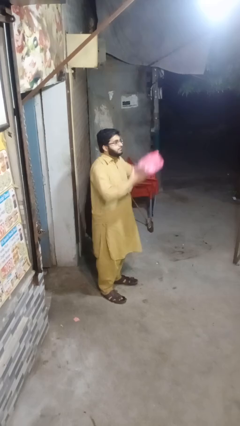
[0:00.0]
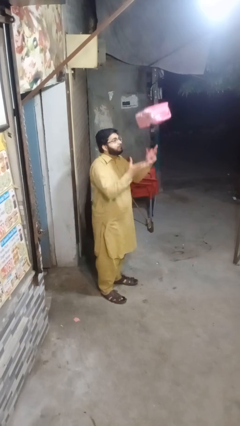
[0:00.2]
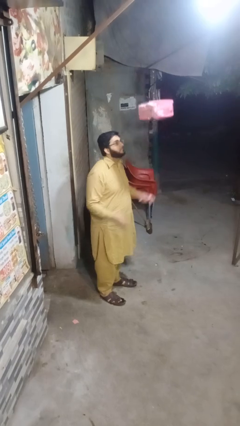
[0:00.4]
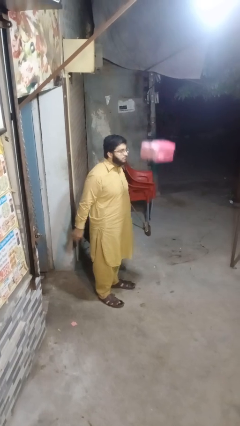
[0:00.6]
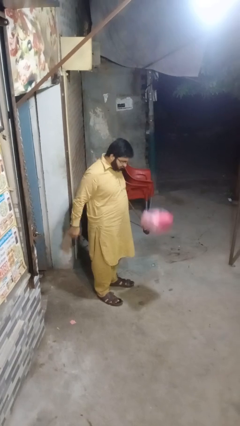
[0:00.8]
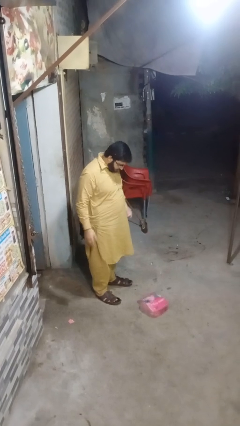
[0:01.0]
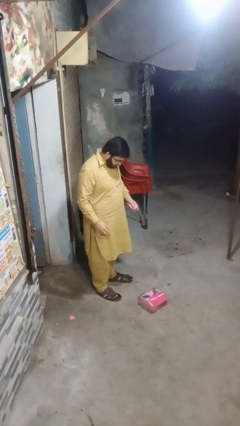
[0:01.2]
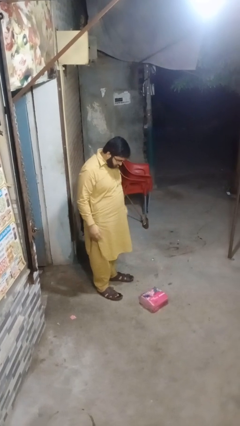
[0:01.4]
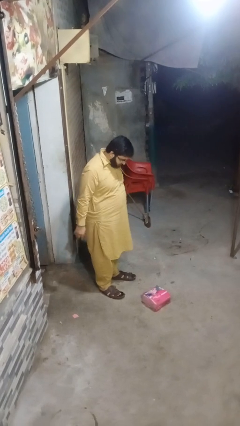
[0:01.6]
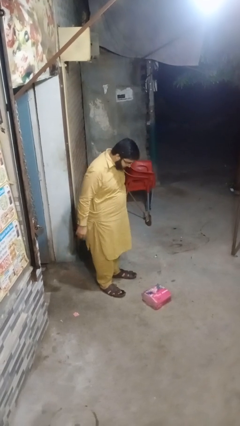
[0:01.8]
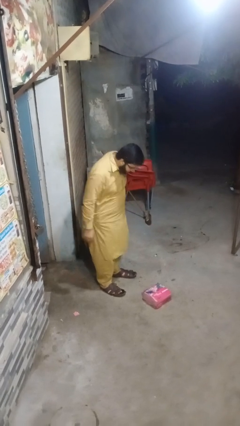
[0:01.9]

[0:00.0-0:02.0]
person throws object into air

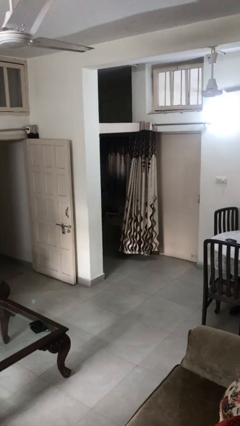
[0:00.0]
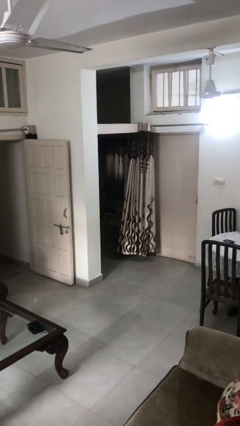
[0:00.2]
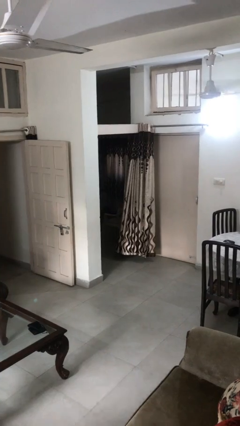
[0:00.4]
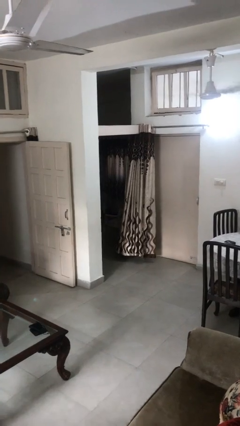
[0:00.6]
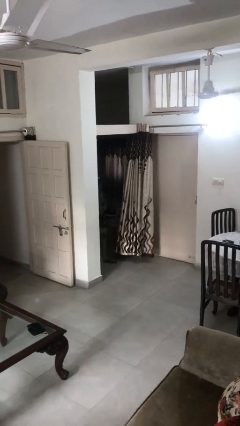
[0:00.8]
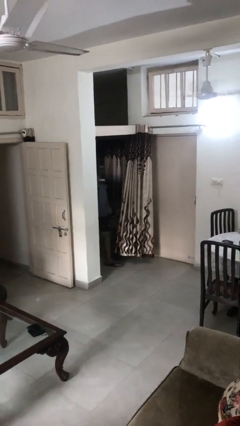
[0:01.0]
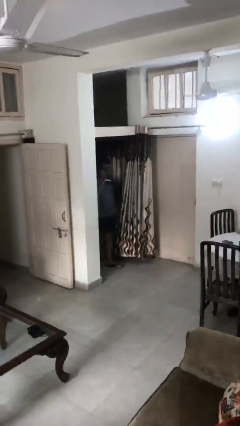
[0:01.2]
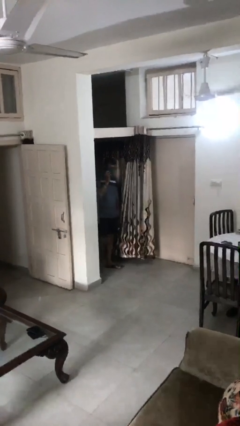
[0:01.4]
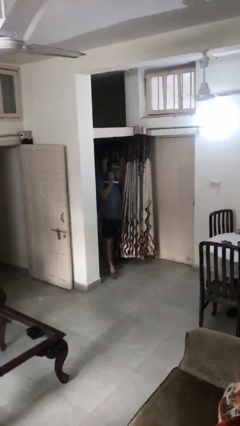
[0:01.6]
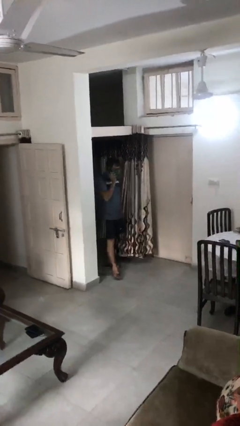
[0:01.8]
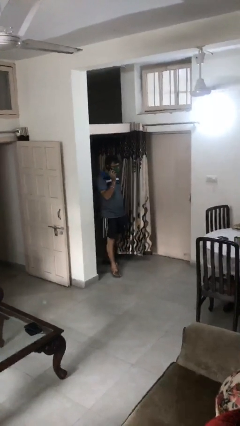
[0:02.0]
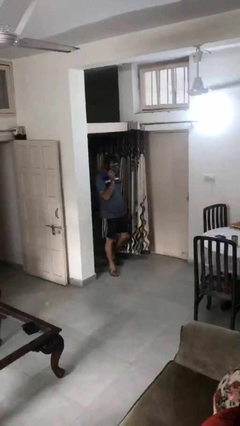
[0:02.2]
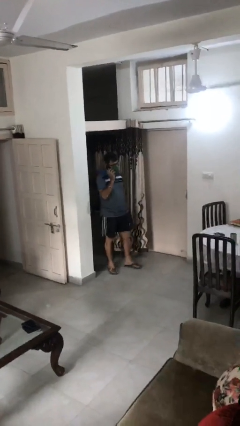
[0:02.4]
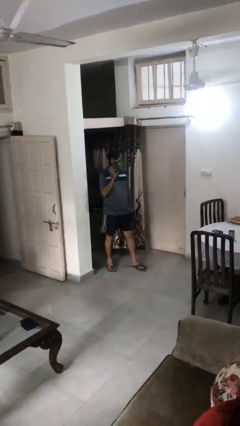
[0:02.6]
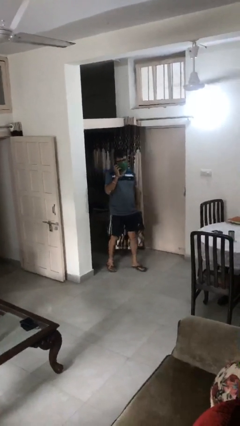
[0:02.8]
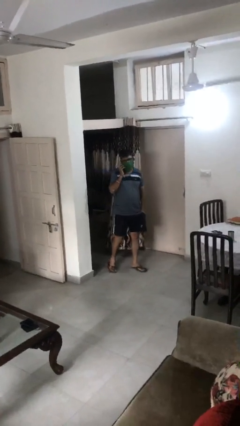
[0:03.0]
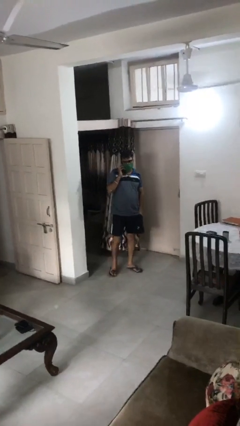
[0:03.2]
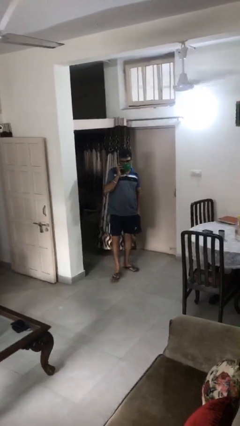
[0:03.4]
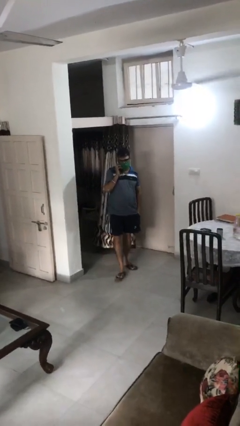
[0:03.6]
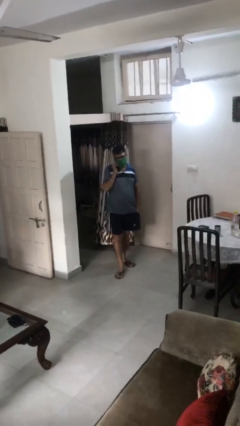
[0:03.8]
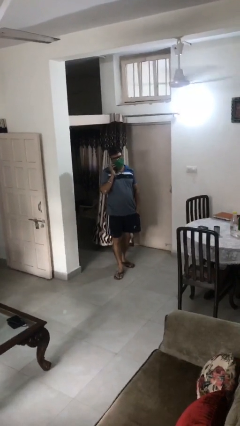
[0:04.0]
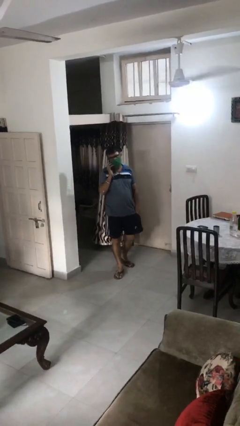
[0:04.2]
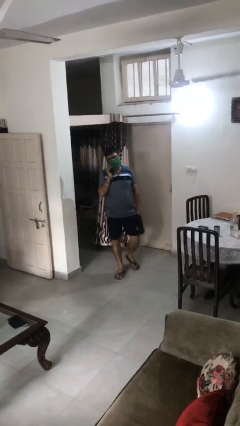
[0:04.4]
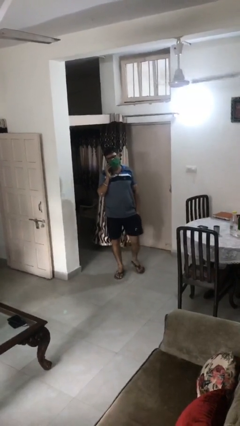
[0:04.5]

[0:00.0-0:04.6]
person enters scene through structure

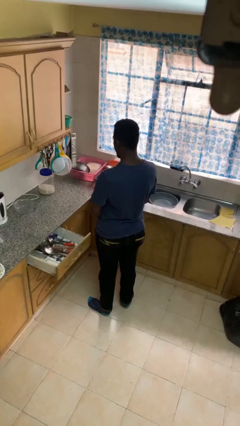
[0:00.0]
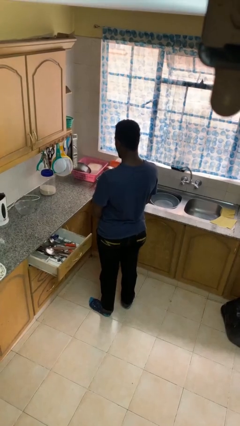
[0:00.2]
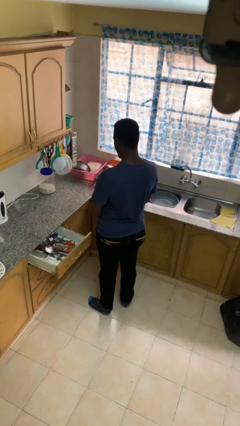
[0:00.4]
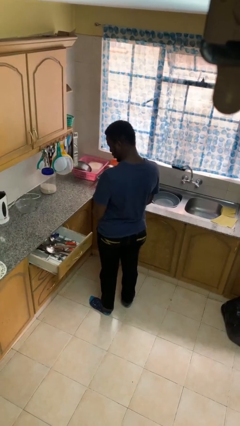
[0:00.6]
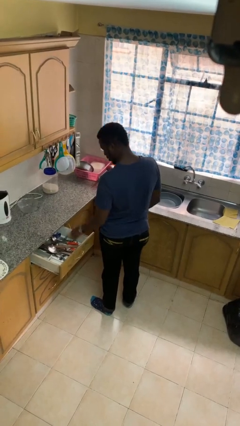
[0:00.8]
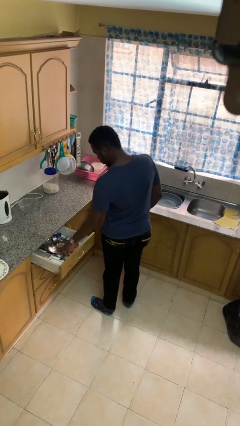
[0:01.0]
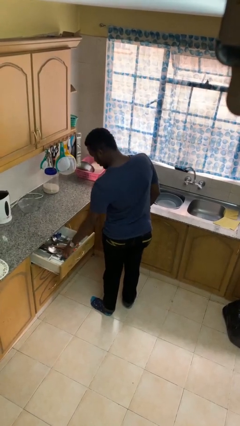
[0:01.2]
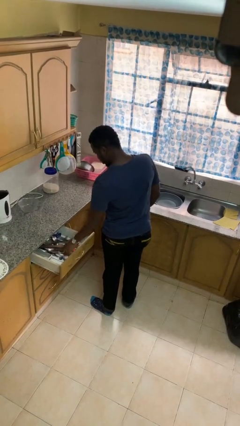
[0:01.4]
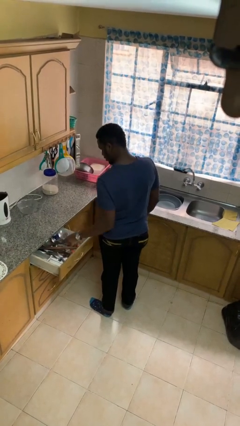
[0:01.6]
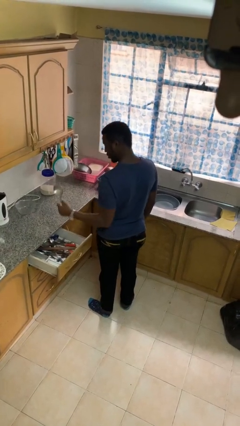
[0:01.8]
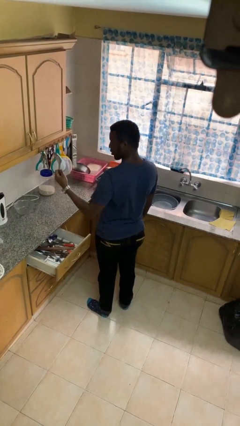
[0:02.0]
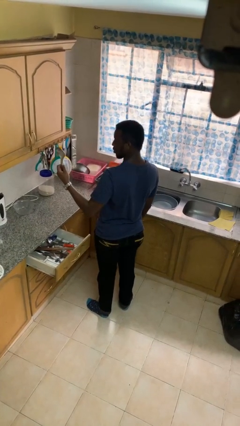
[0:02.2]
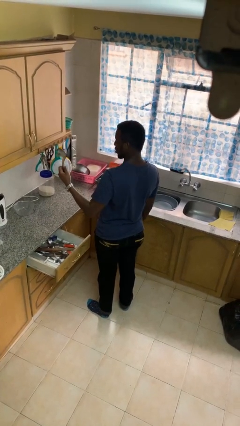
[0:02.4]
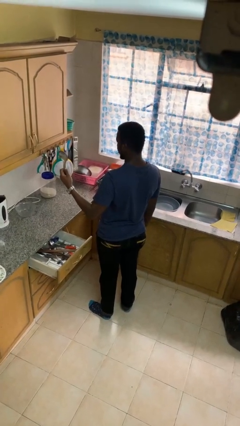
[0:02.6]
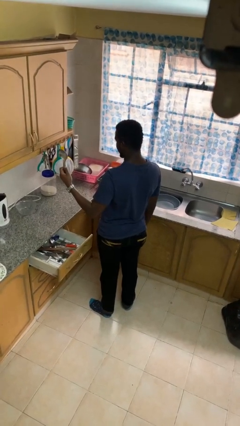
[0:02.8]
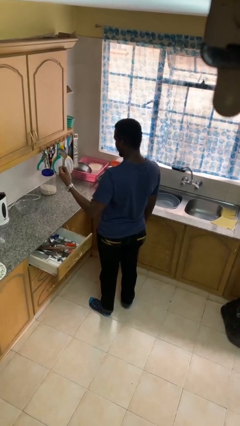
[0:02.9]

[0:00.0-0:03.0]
person takes object from kitchen drawer

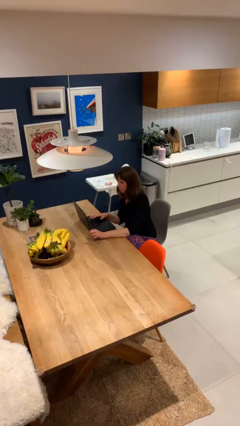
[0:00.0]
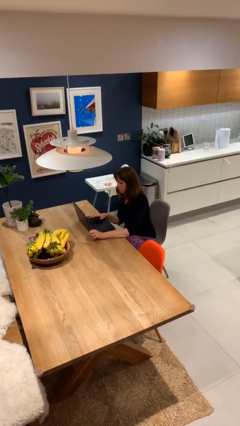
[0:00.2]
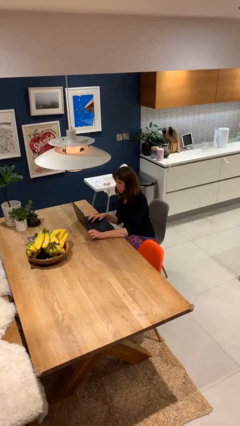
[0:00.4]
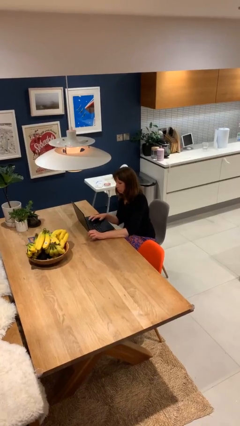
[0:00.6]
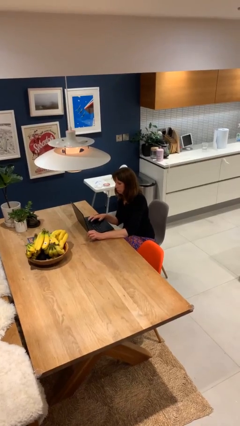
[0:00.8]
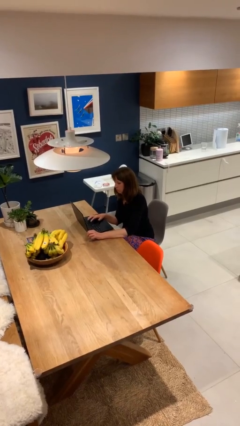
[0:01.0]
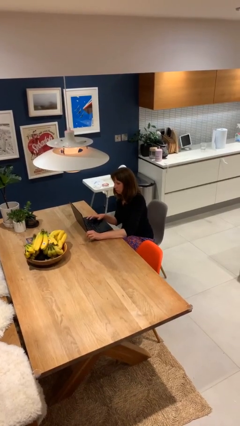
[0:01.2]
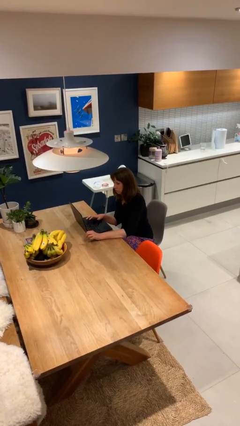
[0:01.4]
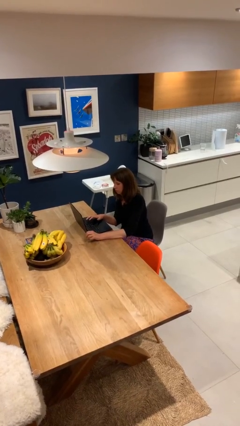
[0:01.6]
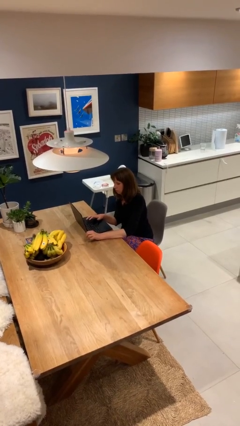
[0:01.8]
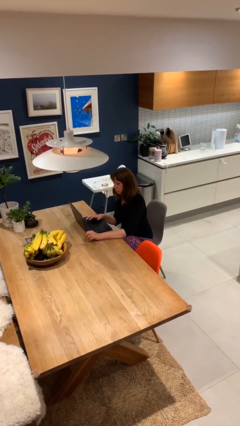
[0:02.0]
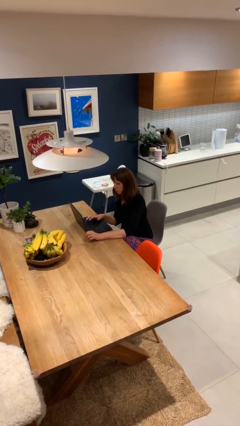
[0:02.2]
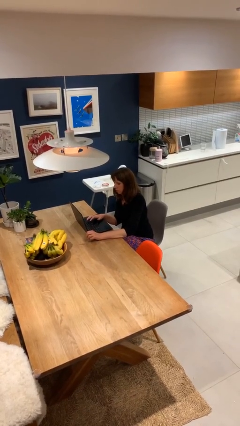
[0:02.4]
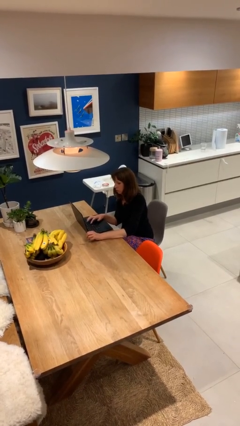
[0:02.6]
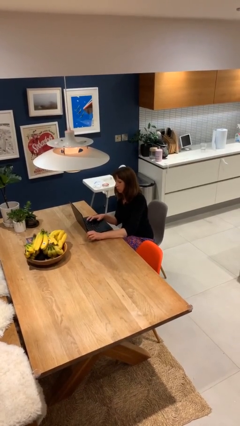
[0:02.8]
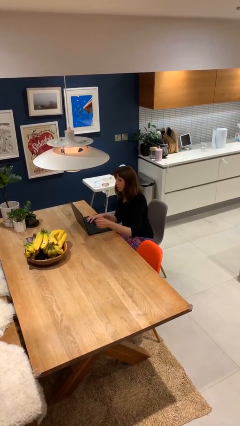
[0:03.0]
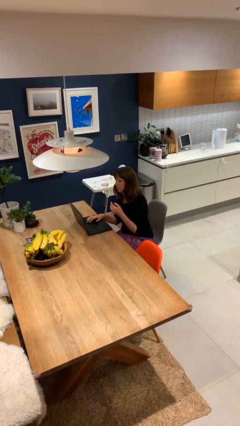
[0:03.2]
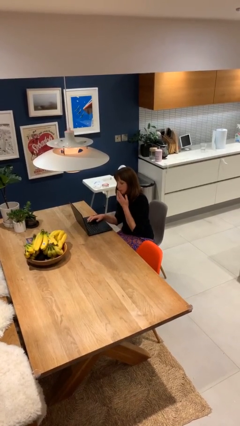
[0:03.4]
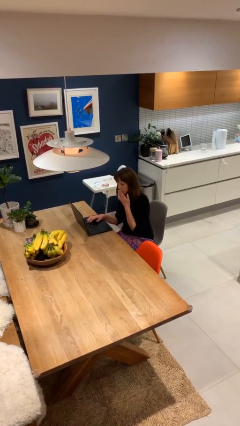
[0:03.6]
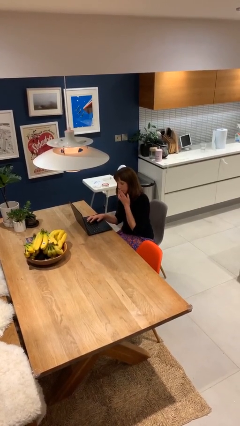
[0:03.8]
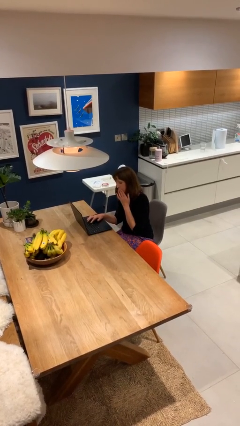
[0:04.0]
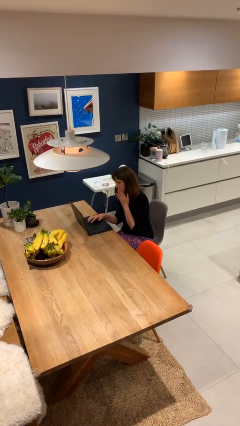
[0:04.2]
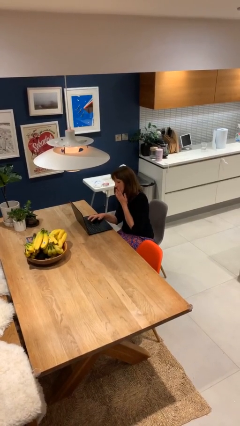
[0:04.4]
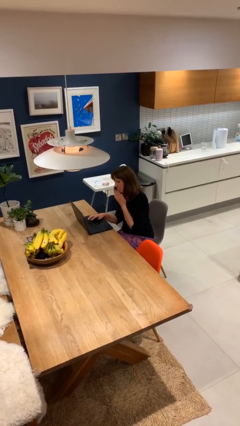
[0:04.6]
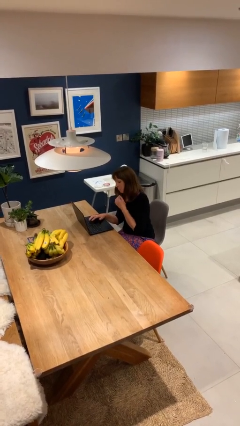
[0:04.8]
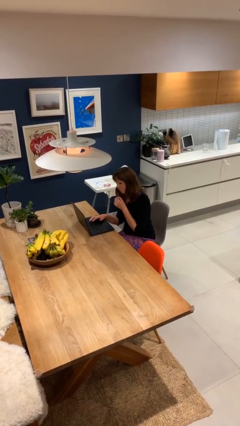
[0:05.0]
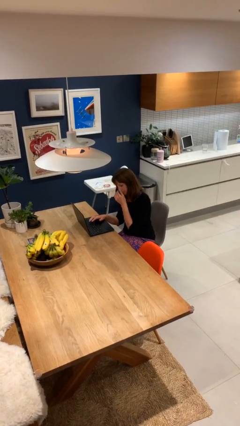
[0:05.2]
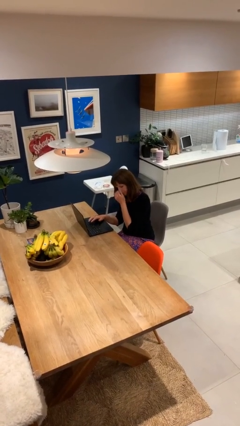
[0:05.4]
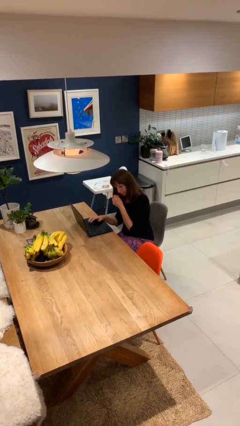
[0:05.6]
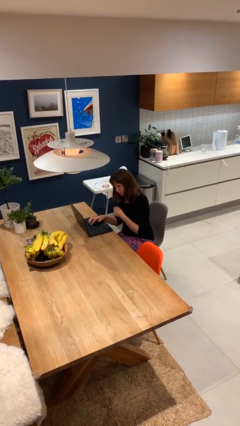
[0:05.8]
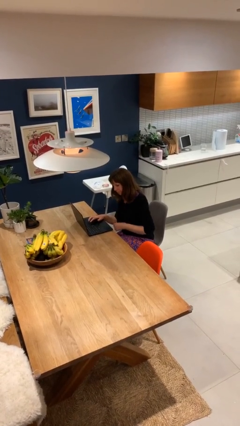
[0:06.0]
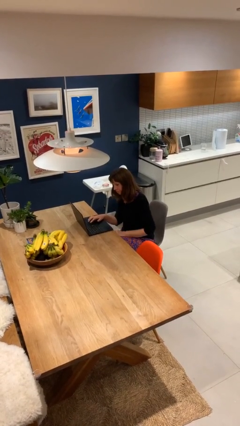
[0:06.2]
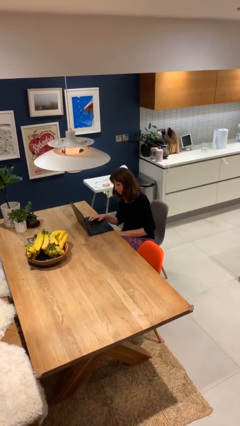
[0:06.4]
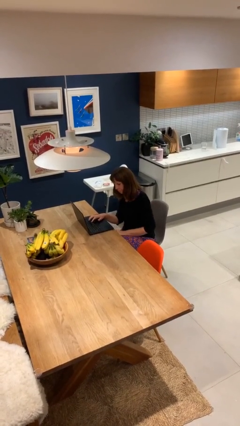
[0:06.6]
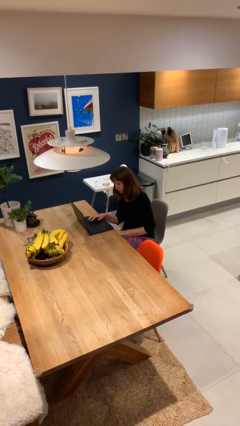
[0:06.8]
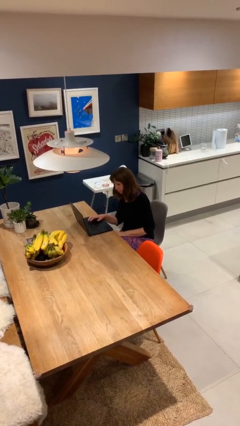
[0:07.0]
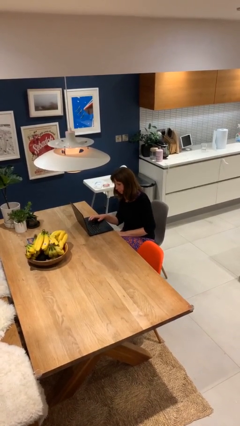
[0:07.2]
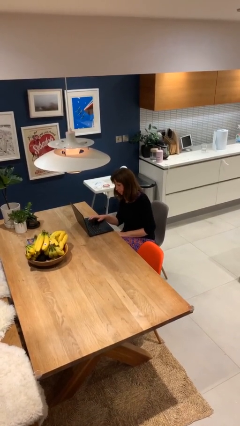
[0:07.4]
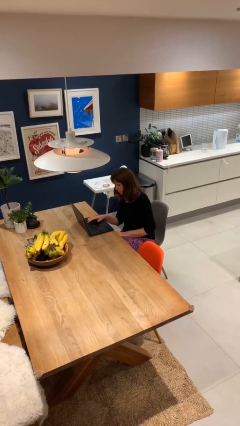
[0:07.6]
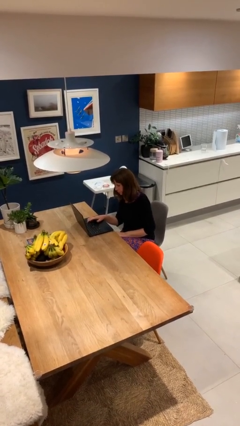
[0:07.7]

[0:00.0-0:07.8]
person interacts with laptop

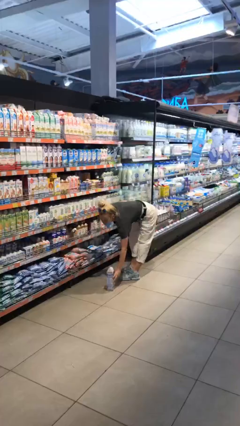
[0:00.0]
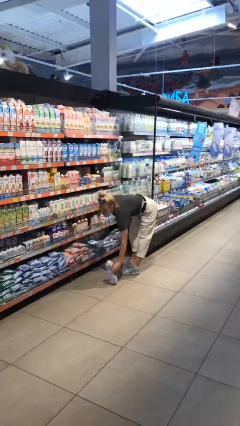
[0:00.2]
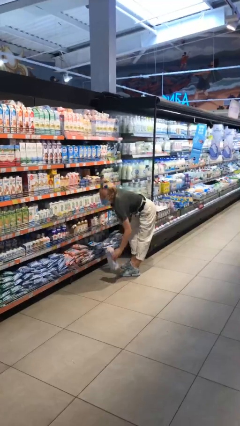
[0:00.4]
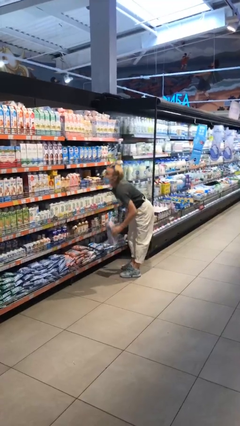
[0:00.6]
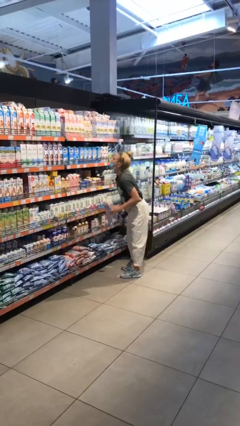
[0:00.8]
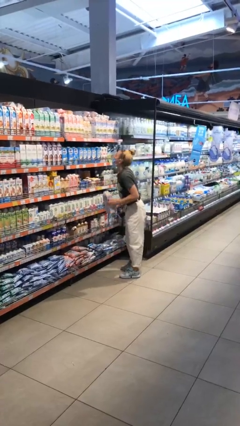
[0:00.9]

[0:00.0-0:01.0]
person picks up object from floor
